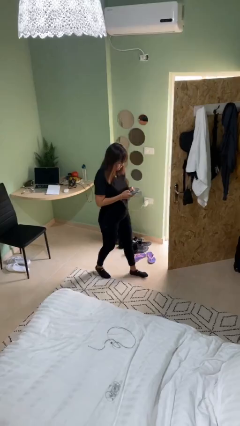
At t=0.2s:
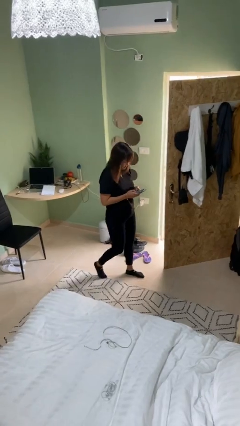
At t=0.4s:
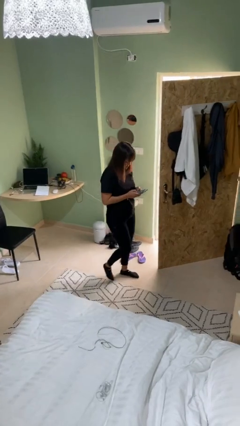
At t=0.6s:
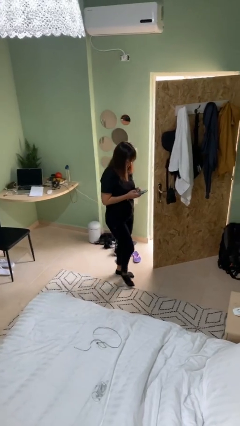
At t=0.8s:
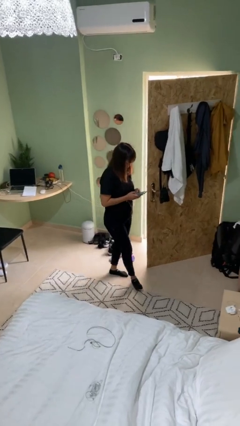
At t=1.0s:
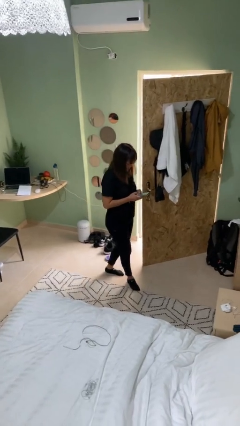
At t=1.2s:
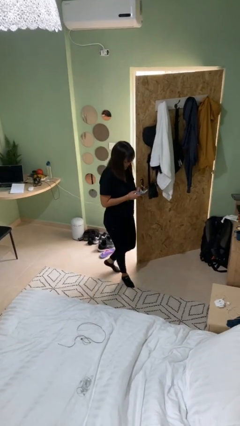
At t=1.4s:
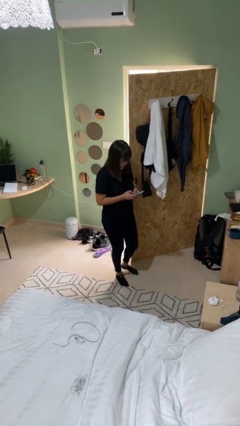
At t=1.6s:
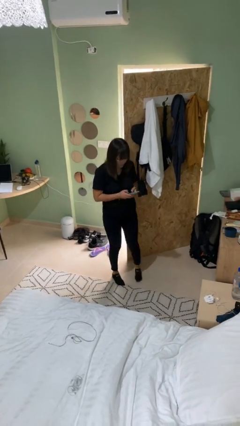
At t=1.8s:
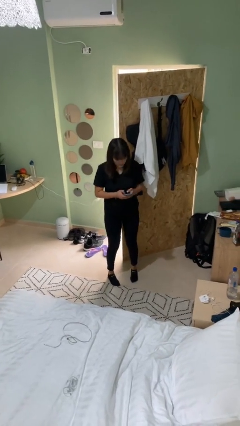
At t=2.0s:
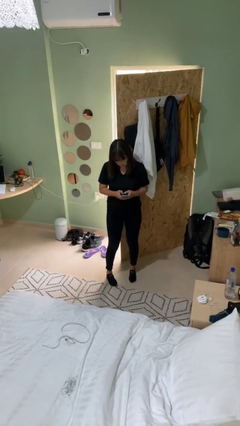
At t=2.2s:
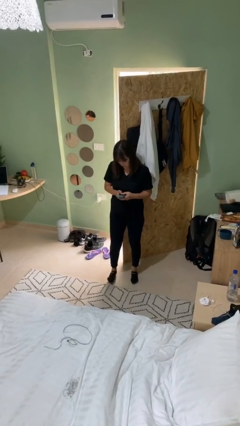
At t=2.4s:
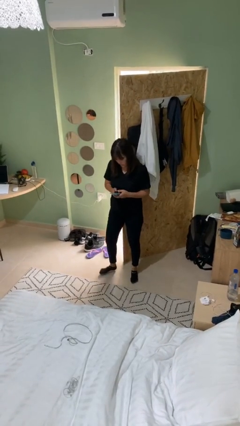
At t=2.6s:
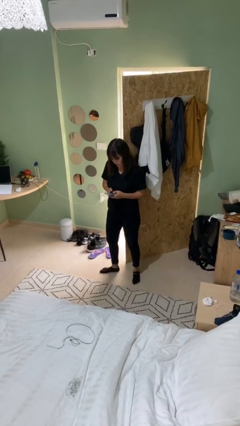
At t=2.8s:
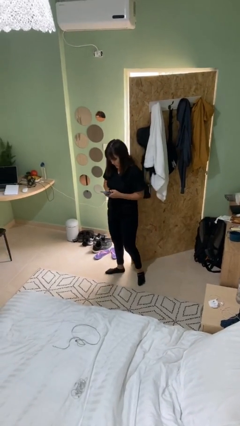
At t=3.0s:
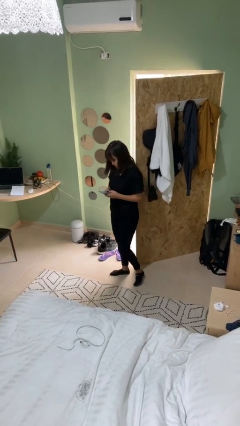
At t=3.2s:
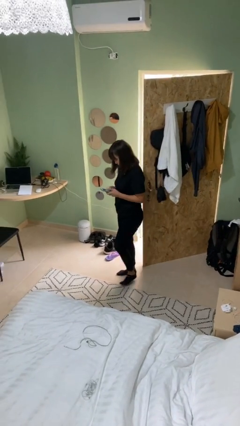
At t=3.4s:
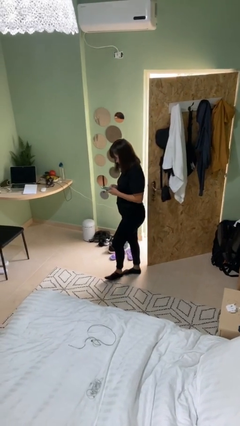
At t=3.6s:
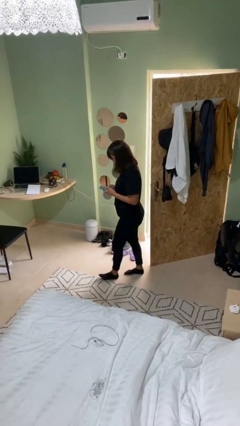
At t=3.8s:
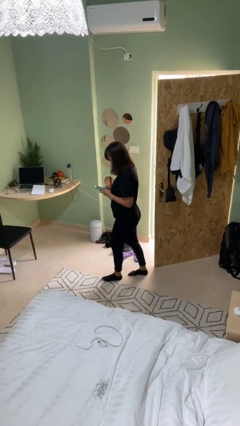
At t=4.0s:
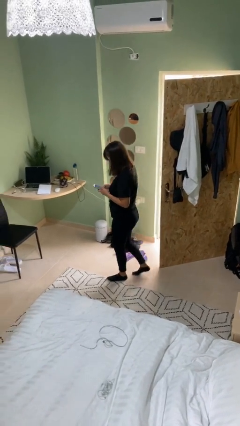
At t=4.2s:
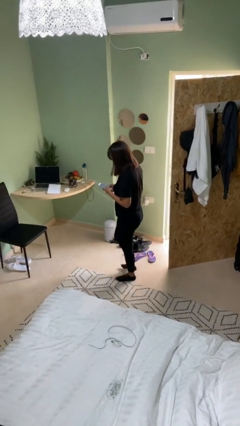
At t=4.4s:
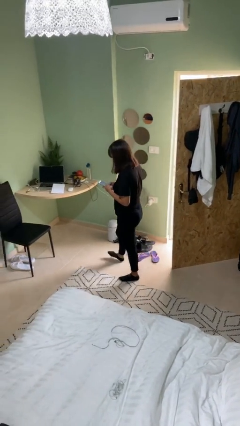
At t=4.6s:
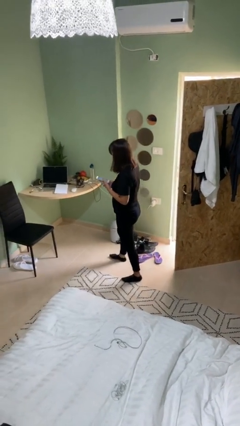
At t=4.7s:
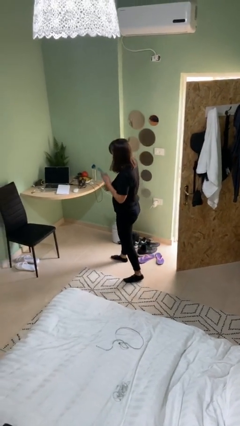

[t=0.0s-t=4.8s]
person texts on phone

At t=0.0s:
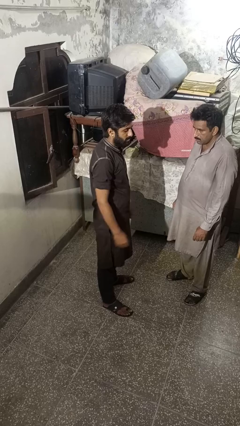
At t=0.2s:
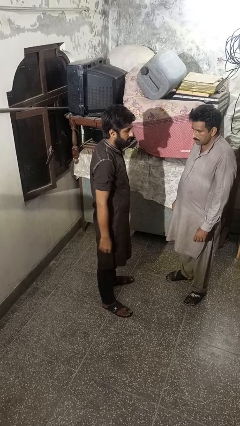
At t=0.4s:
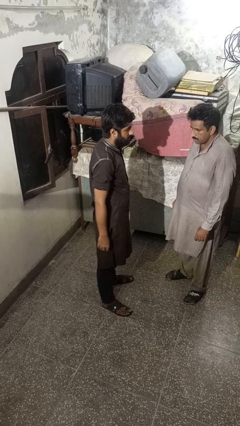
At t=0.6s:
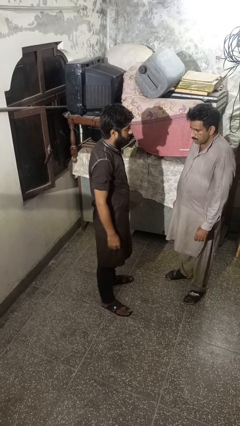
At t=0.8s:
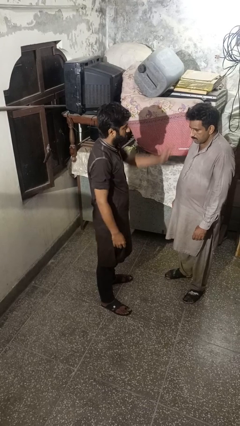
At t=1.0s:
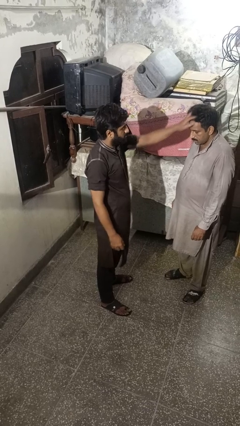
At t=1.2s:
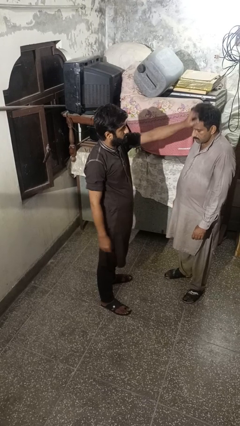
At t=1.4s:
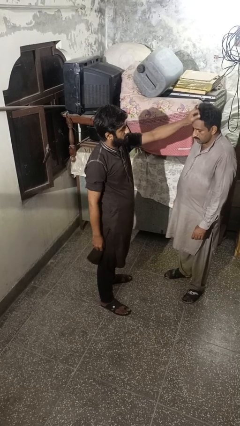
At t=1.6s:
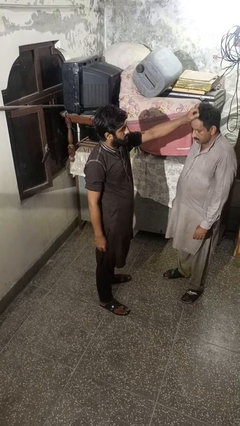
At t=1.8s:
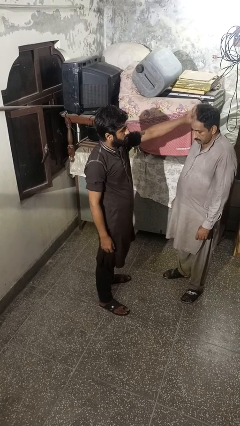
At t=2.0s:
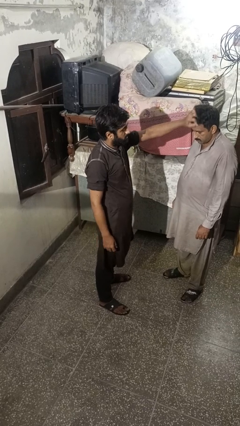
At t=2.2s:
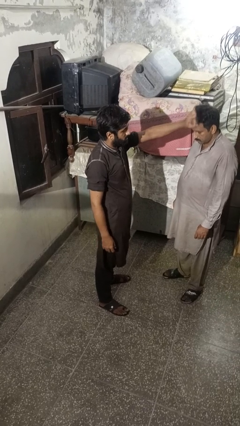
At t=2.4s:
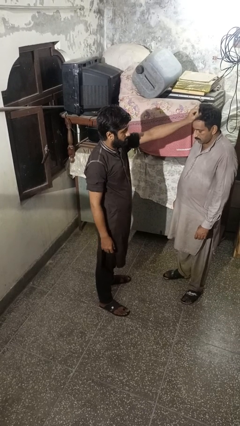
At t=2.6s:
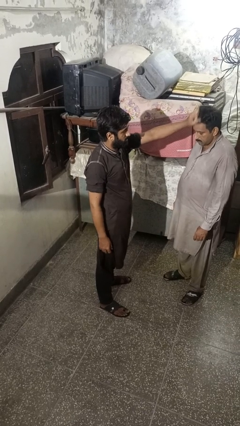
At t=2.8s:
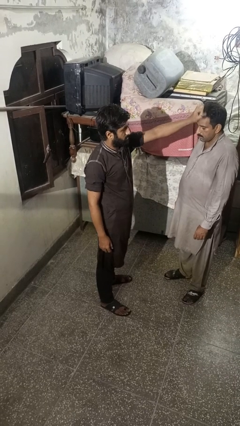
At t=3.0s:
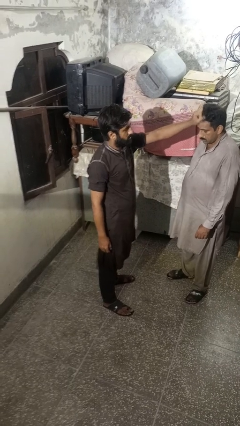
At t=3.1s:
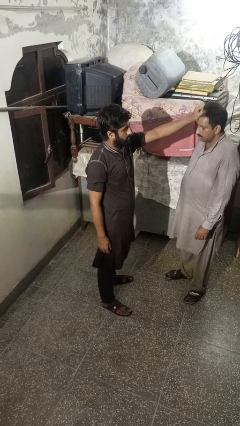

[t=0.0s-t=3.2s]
person grabs person by hair

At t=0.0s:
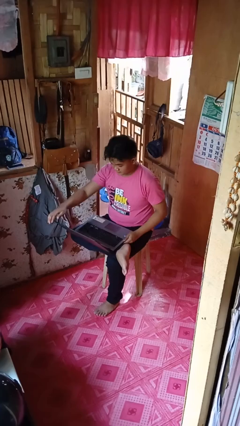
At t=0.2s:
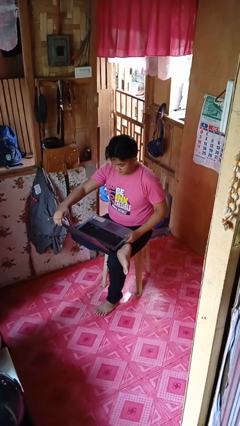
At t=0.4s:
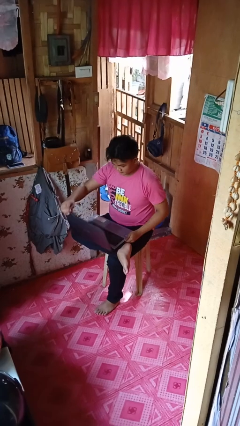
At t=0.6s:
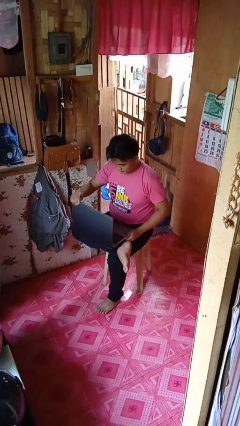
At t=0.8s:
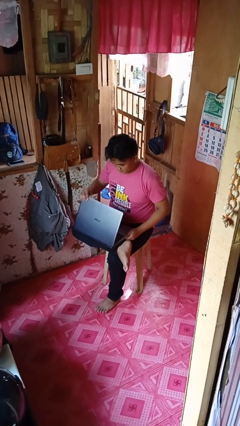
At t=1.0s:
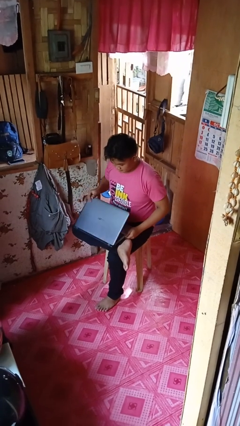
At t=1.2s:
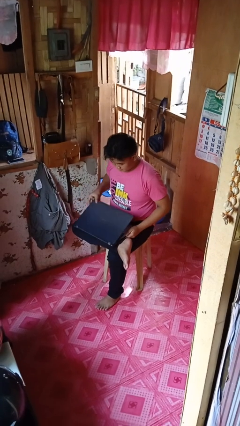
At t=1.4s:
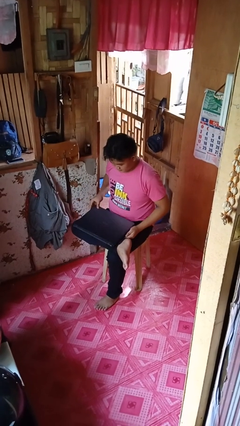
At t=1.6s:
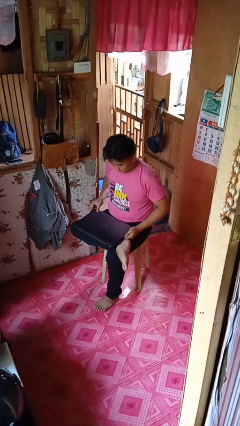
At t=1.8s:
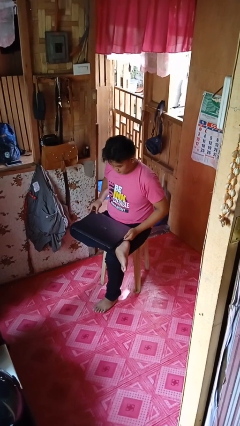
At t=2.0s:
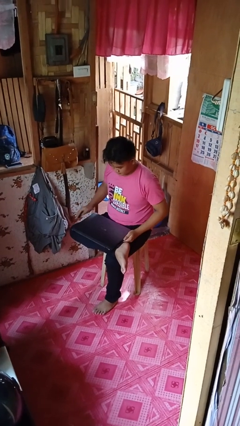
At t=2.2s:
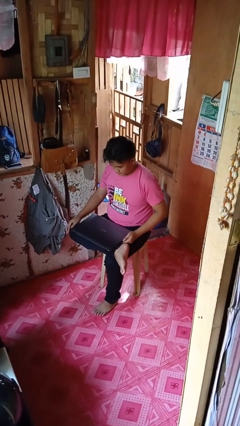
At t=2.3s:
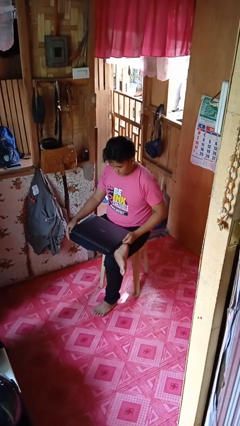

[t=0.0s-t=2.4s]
person closes laptop

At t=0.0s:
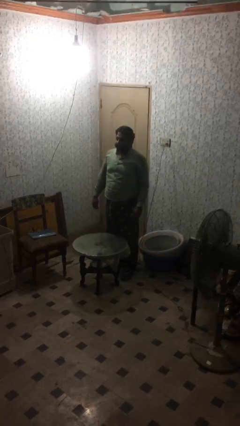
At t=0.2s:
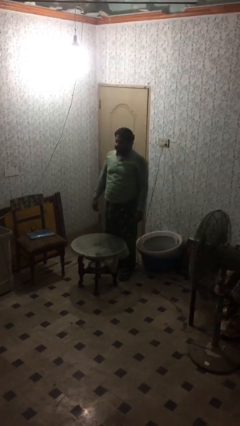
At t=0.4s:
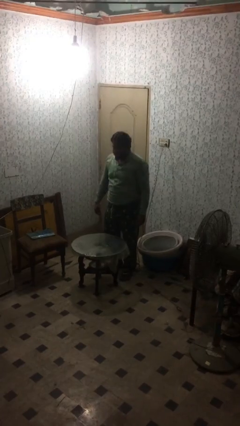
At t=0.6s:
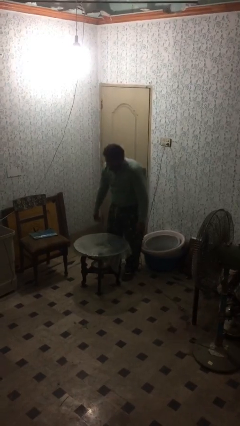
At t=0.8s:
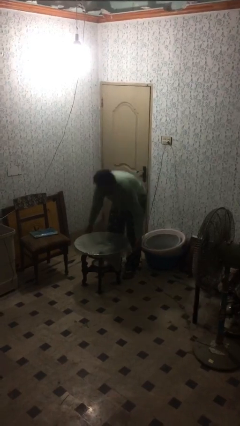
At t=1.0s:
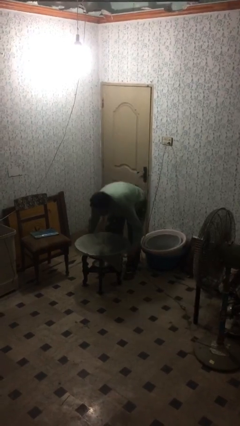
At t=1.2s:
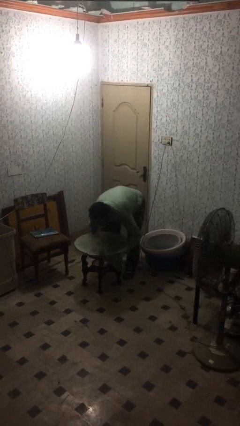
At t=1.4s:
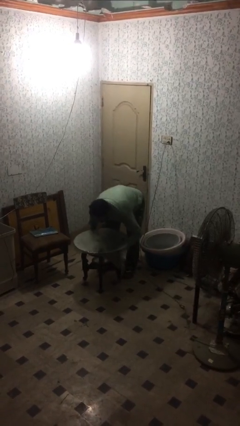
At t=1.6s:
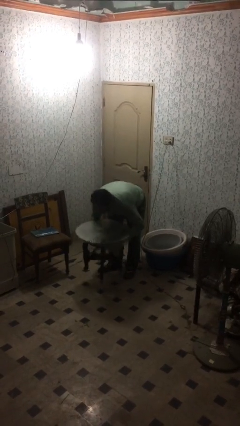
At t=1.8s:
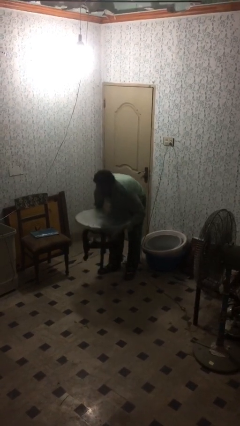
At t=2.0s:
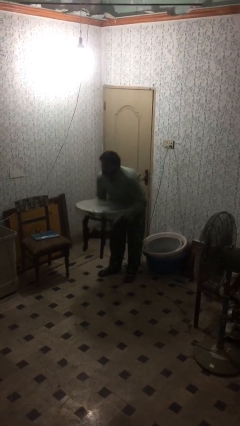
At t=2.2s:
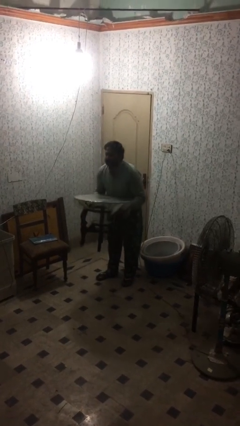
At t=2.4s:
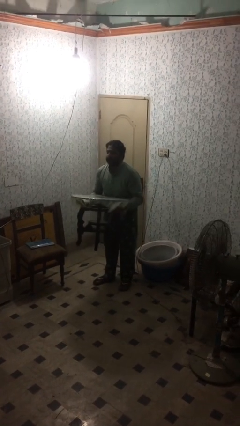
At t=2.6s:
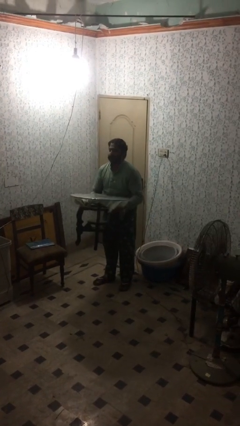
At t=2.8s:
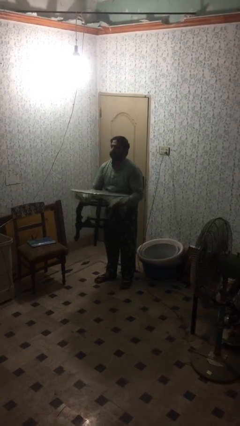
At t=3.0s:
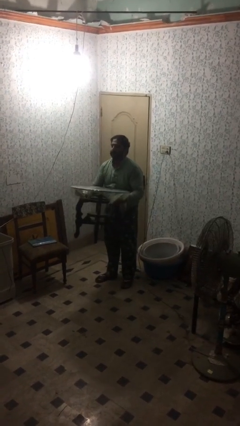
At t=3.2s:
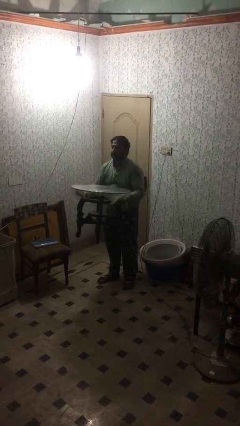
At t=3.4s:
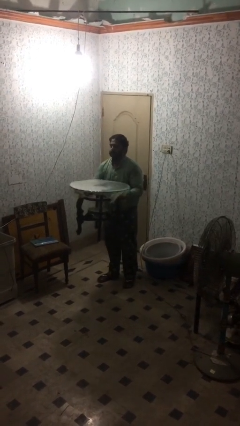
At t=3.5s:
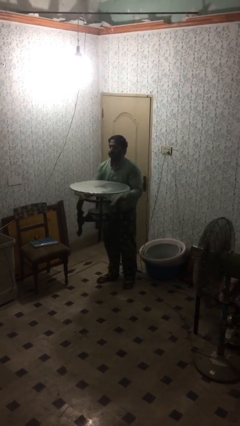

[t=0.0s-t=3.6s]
person picks up object from floor

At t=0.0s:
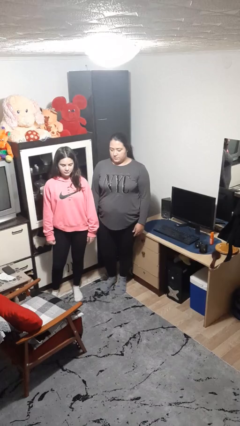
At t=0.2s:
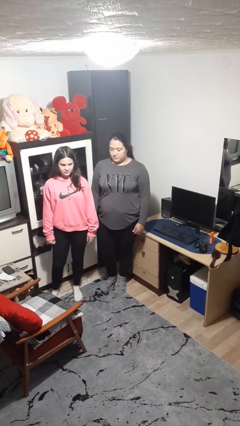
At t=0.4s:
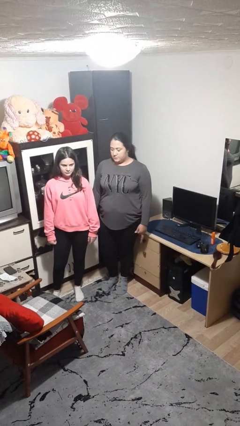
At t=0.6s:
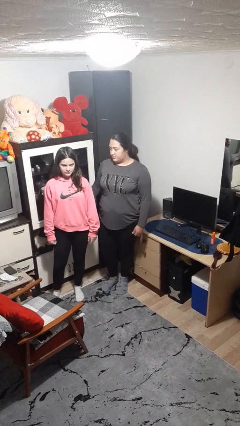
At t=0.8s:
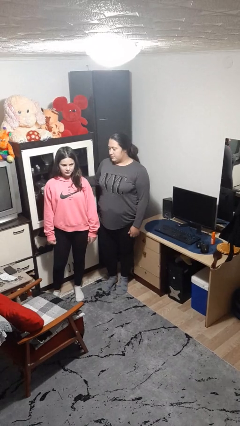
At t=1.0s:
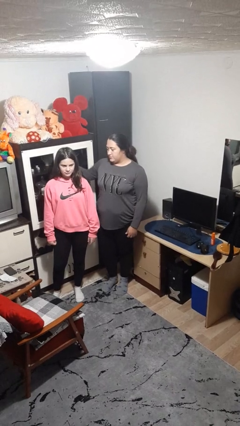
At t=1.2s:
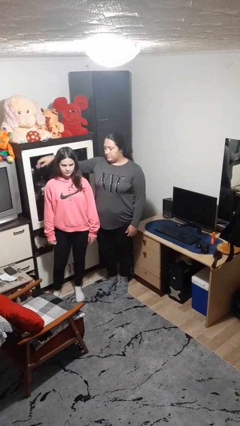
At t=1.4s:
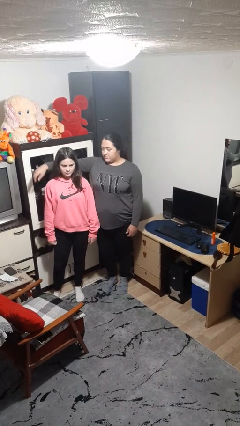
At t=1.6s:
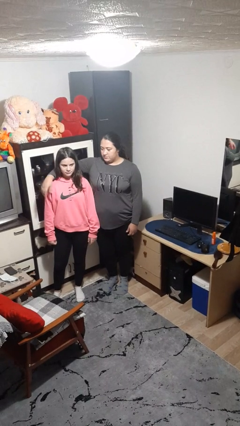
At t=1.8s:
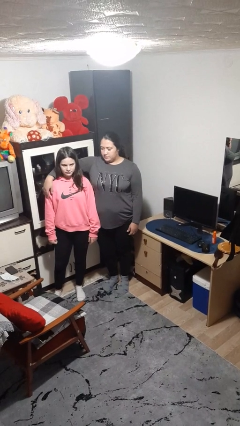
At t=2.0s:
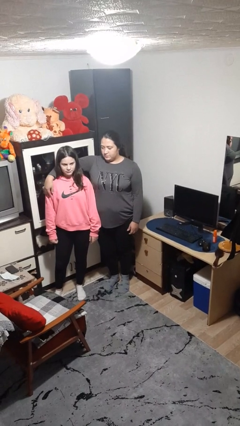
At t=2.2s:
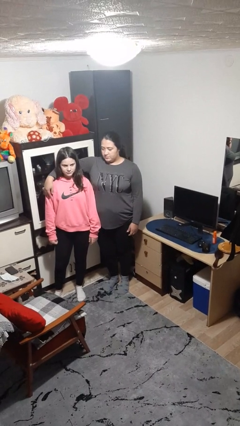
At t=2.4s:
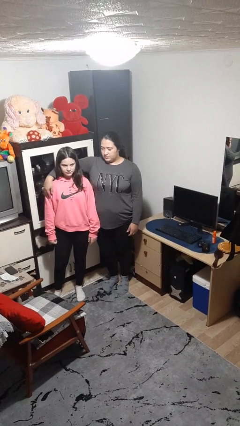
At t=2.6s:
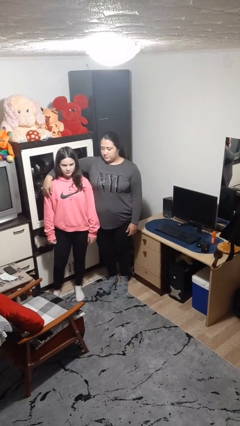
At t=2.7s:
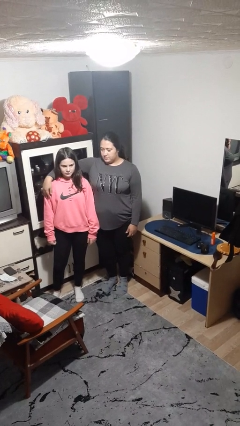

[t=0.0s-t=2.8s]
person hugs person from side

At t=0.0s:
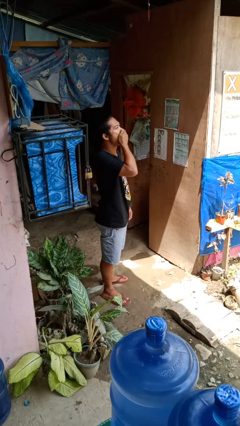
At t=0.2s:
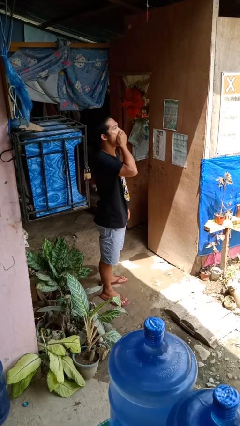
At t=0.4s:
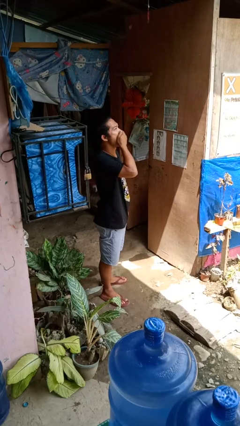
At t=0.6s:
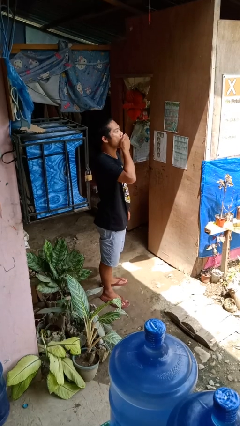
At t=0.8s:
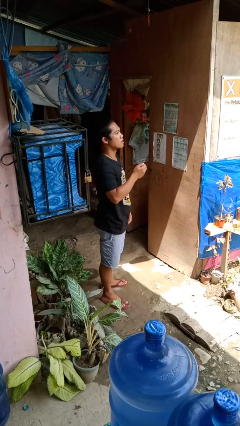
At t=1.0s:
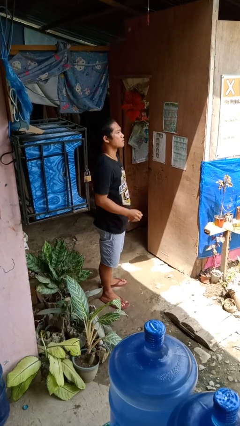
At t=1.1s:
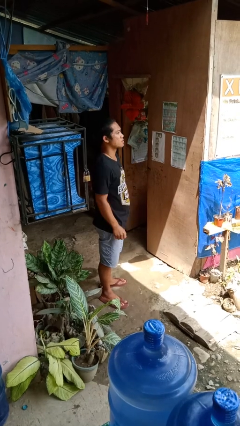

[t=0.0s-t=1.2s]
person yawns
